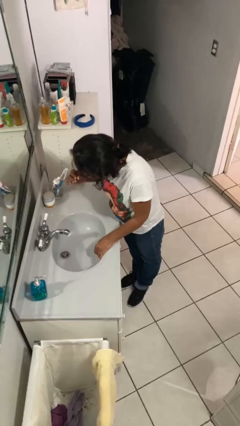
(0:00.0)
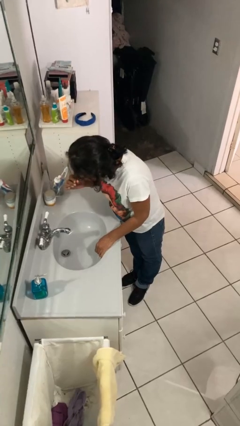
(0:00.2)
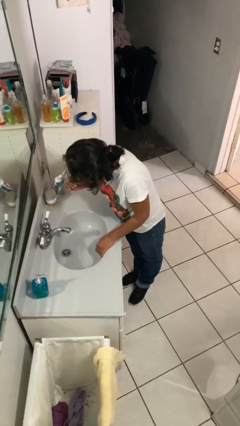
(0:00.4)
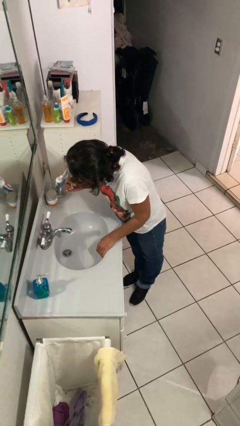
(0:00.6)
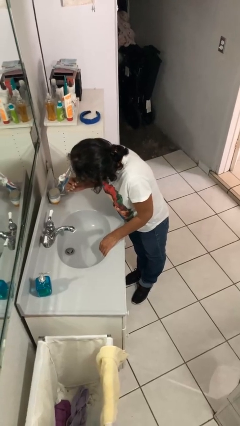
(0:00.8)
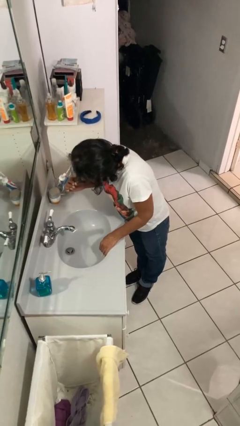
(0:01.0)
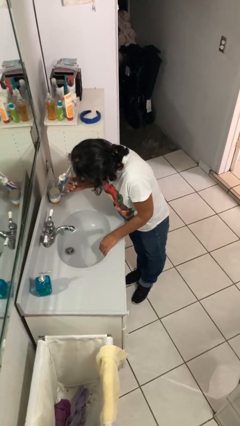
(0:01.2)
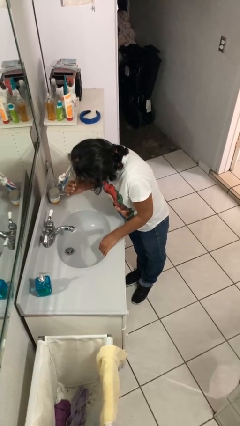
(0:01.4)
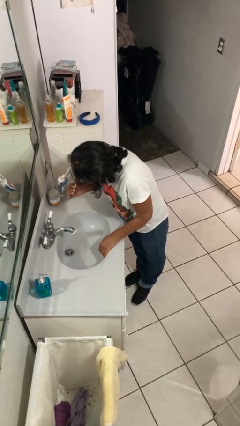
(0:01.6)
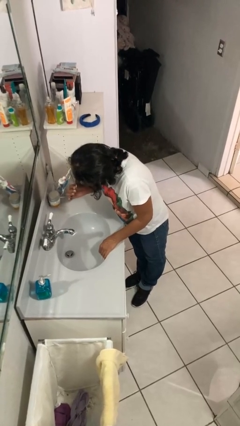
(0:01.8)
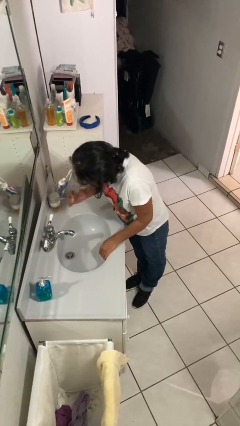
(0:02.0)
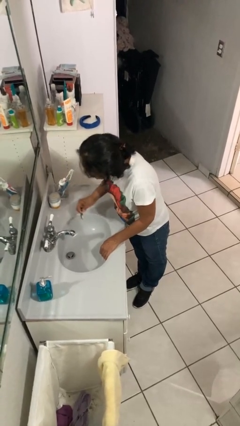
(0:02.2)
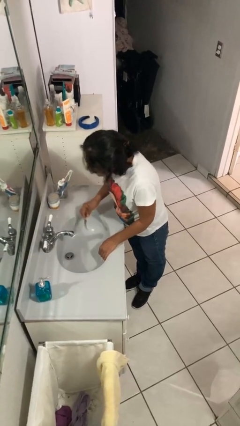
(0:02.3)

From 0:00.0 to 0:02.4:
person brushes teeth

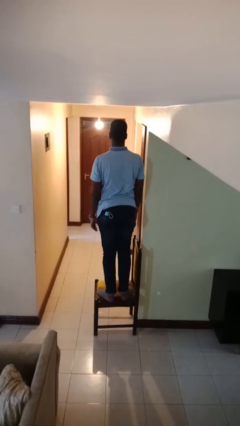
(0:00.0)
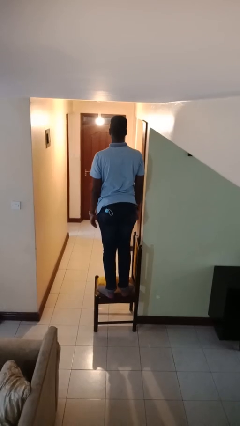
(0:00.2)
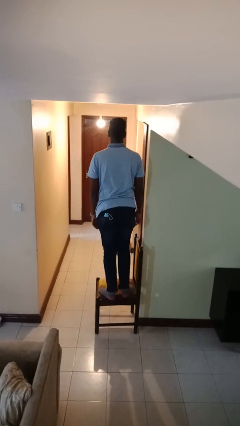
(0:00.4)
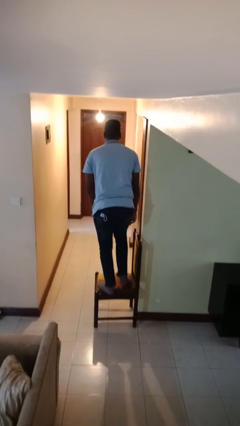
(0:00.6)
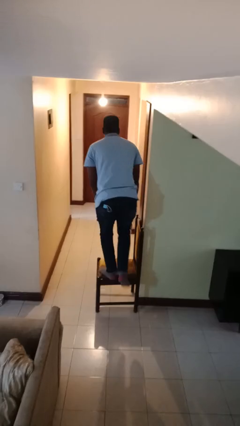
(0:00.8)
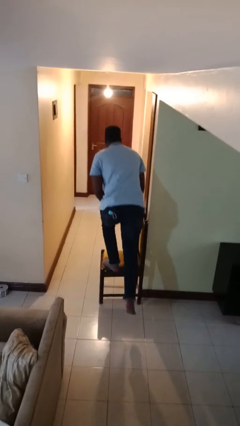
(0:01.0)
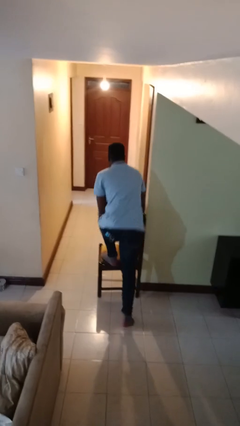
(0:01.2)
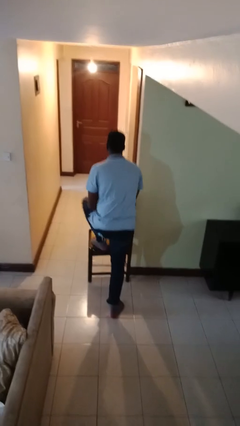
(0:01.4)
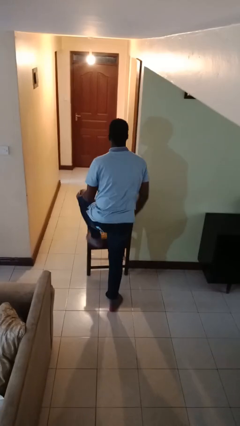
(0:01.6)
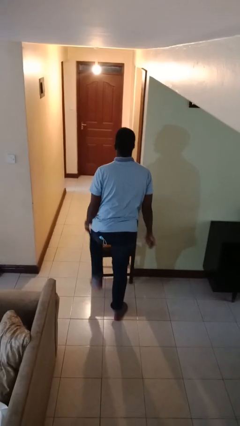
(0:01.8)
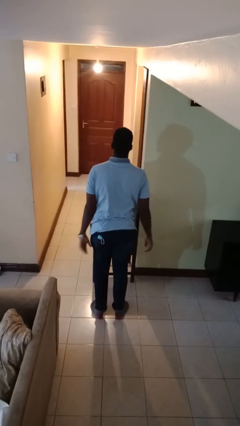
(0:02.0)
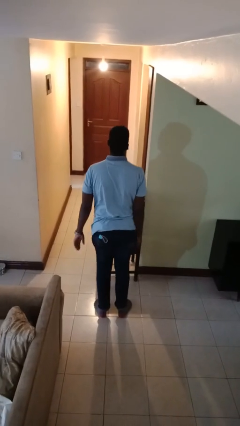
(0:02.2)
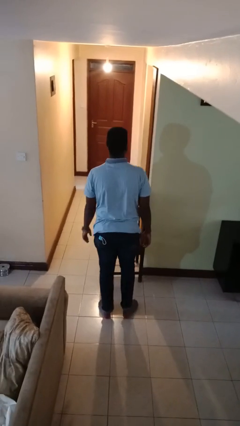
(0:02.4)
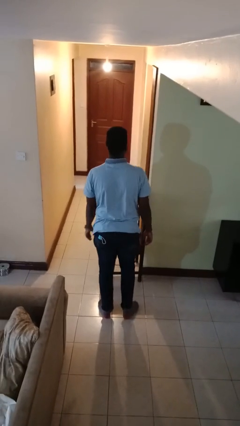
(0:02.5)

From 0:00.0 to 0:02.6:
person climbs off chair

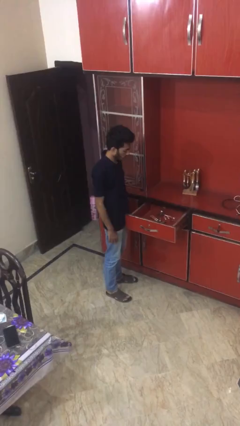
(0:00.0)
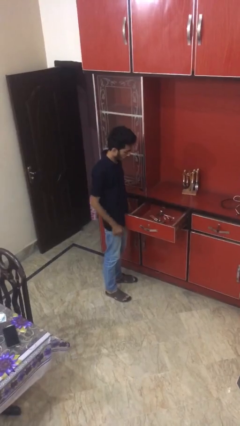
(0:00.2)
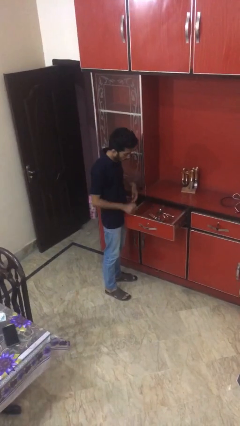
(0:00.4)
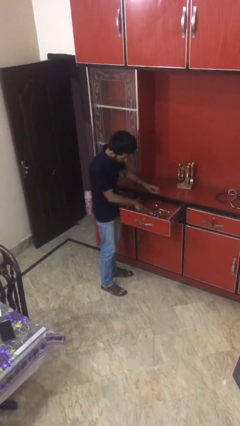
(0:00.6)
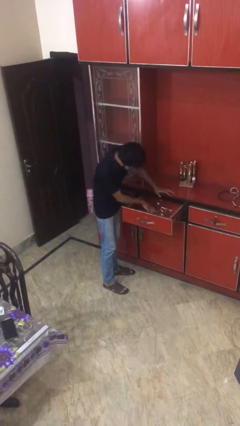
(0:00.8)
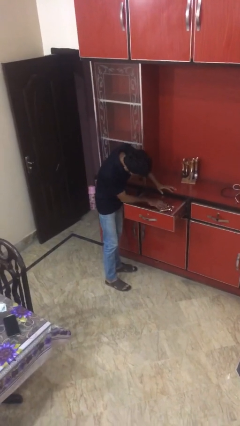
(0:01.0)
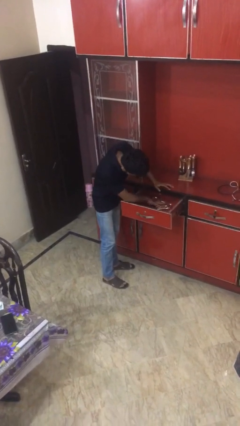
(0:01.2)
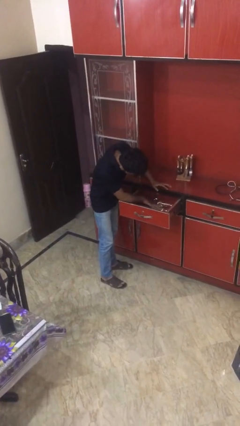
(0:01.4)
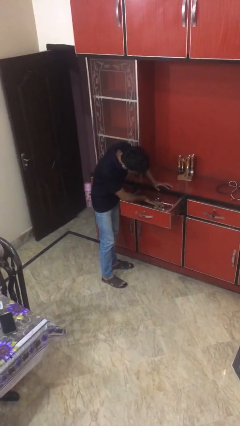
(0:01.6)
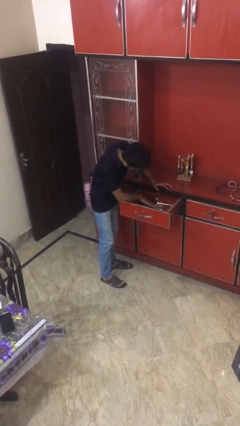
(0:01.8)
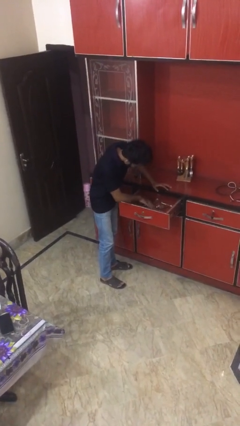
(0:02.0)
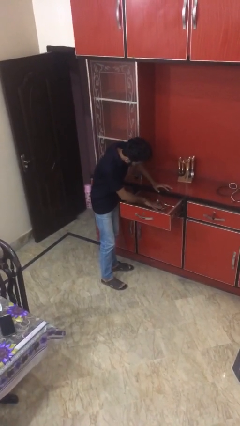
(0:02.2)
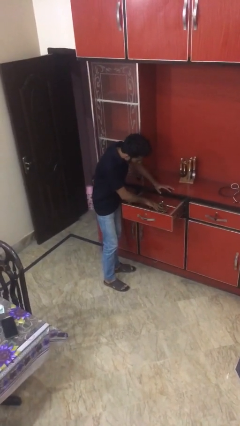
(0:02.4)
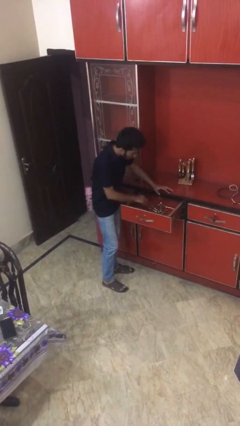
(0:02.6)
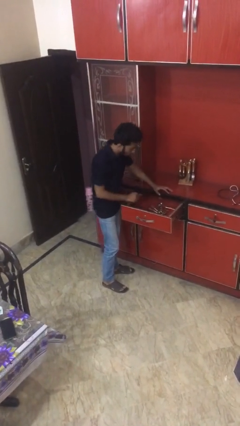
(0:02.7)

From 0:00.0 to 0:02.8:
person searches in kitchen drawer

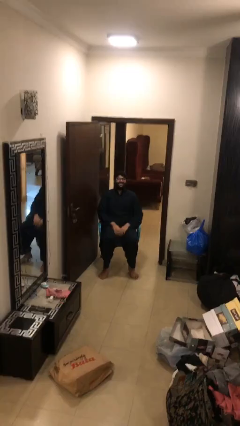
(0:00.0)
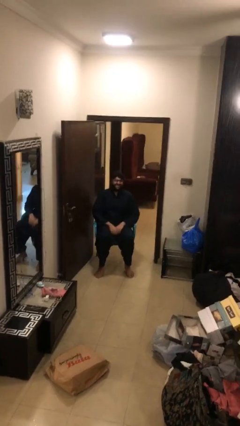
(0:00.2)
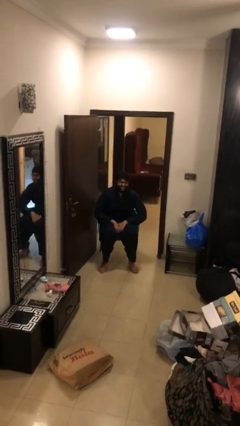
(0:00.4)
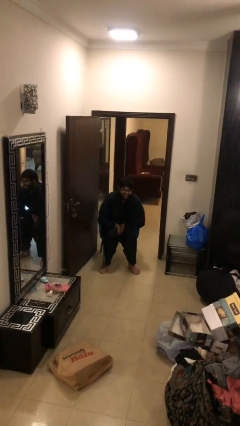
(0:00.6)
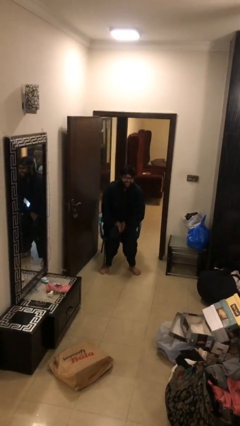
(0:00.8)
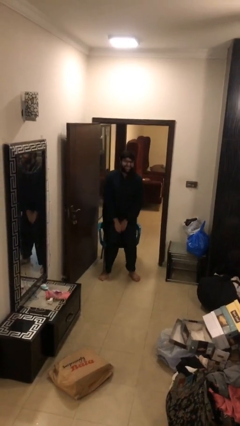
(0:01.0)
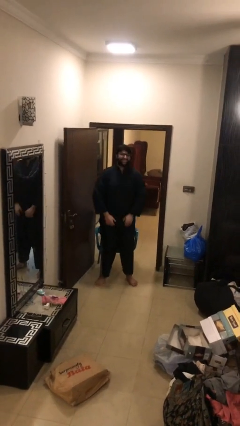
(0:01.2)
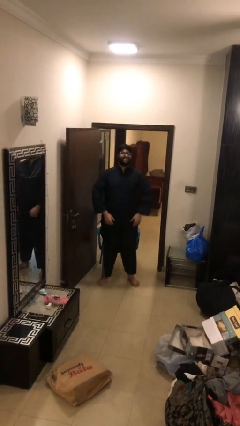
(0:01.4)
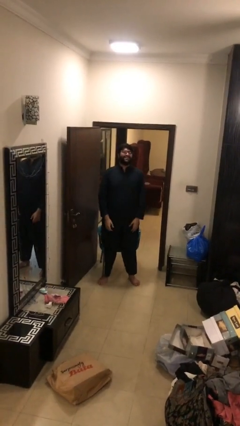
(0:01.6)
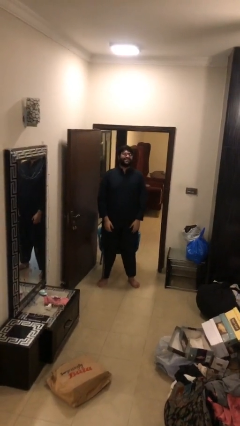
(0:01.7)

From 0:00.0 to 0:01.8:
person stands up

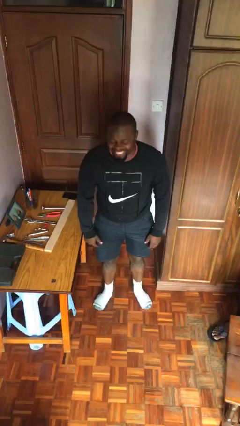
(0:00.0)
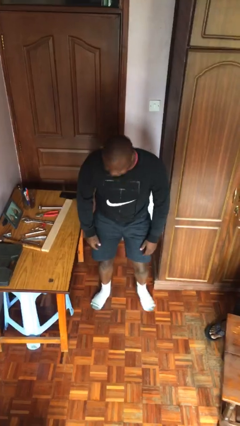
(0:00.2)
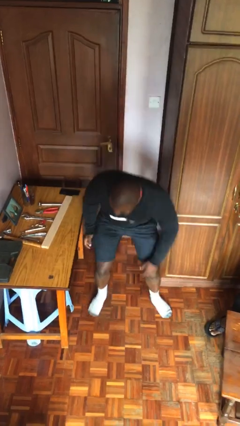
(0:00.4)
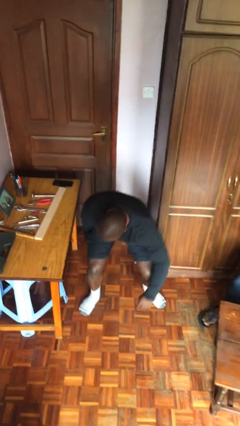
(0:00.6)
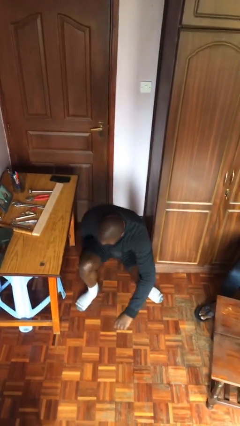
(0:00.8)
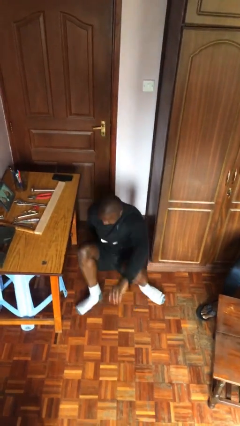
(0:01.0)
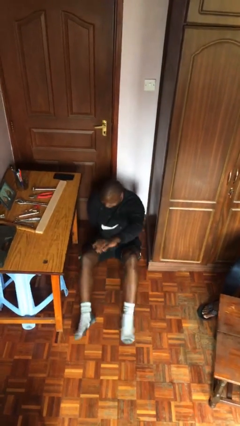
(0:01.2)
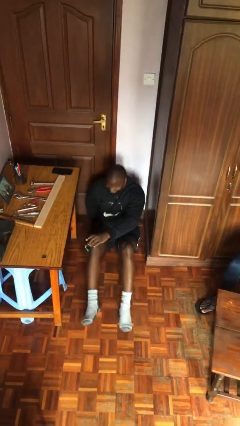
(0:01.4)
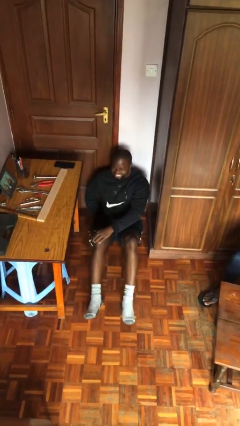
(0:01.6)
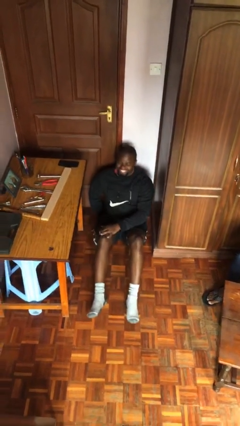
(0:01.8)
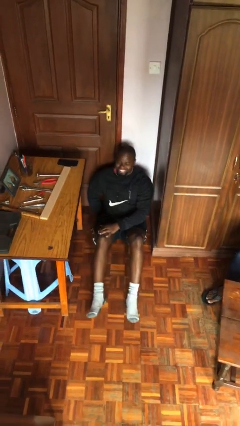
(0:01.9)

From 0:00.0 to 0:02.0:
person sits down

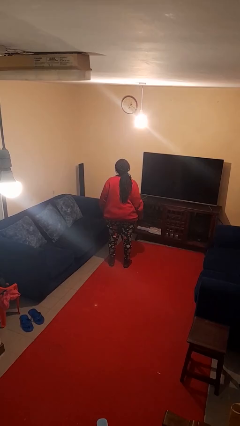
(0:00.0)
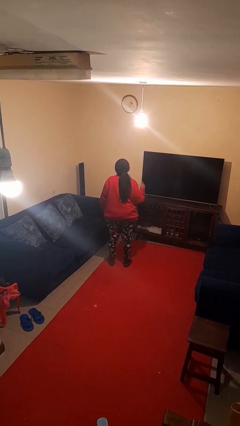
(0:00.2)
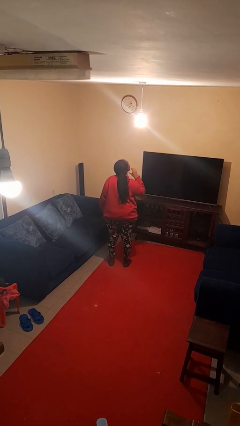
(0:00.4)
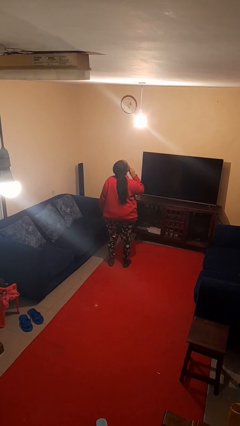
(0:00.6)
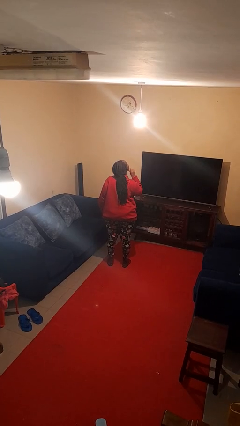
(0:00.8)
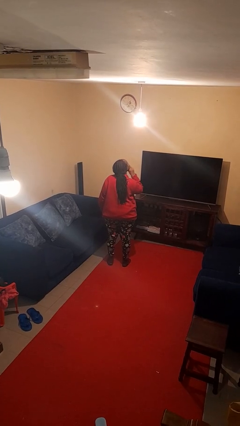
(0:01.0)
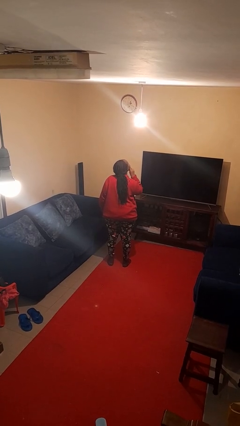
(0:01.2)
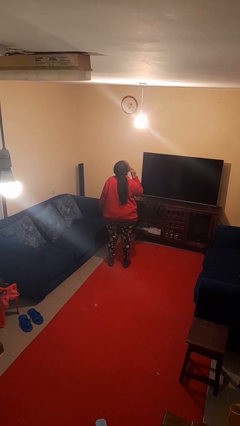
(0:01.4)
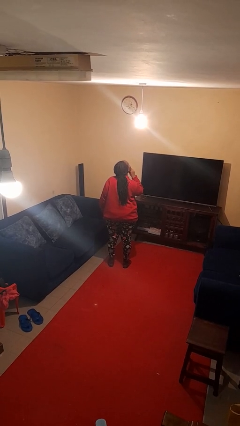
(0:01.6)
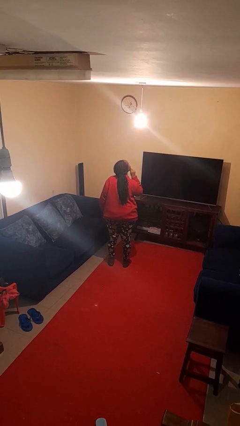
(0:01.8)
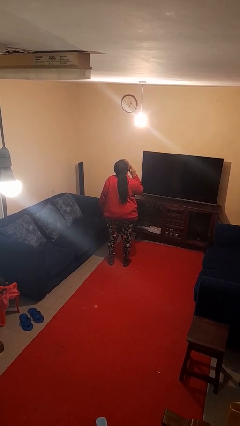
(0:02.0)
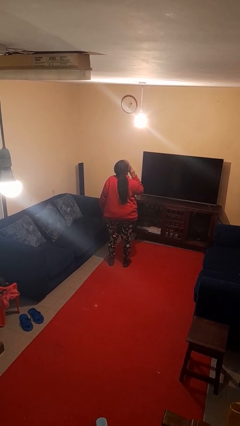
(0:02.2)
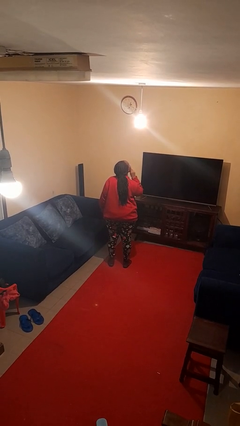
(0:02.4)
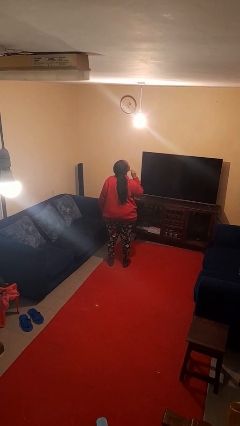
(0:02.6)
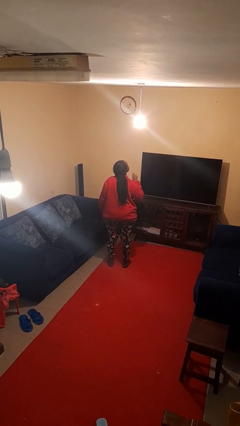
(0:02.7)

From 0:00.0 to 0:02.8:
person strokes chin

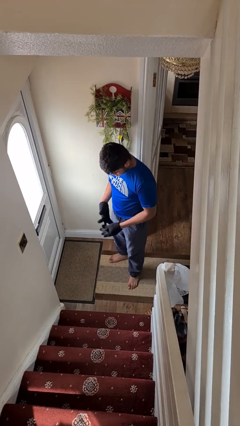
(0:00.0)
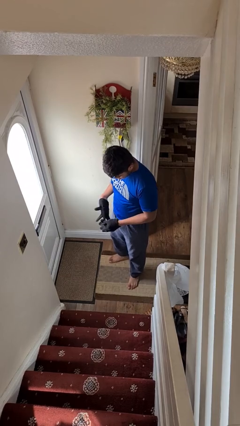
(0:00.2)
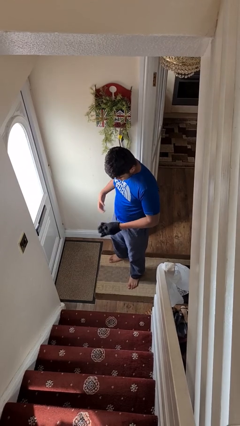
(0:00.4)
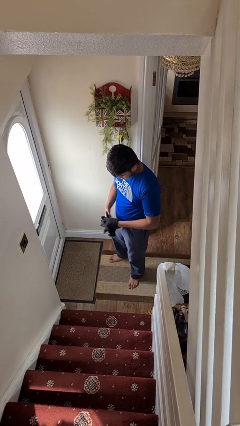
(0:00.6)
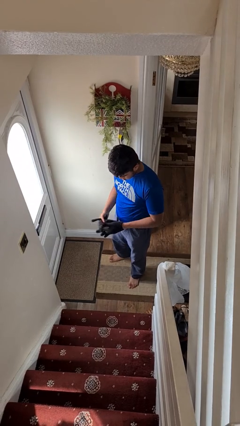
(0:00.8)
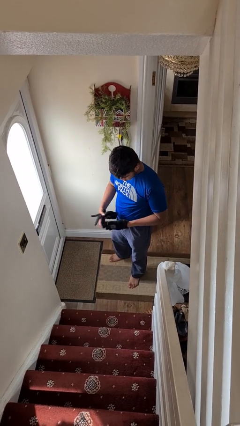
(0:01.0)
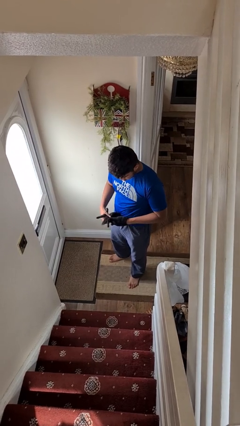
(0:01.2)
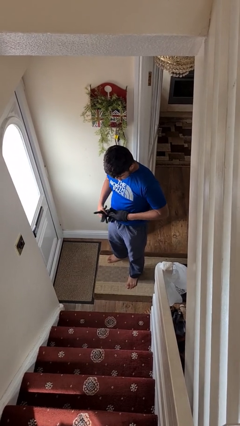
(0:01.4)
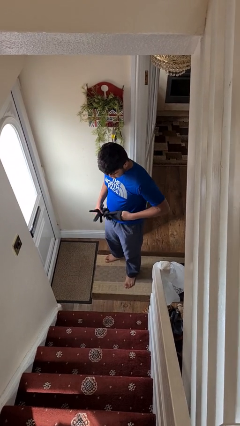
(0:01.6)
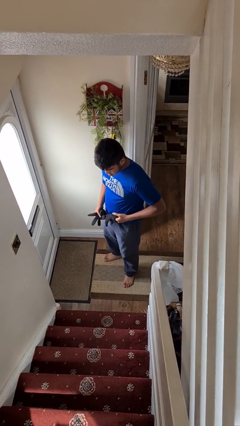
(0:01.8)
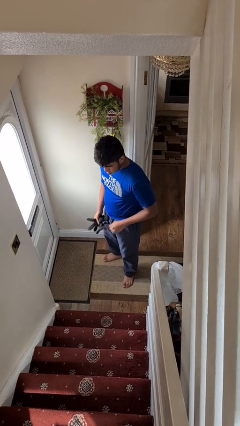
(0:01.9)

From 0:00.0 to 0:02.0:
person takes off gloves

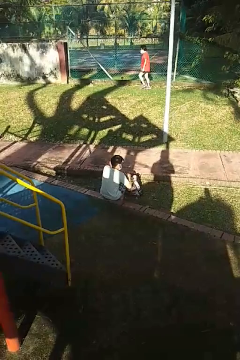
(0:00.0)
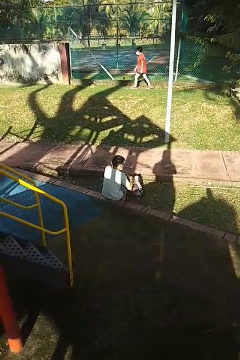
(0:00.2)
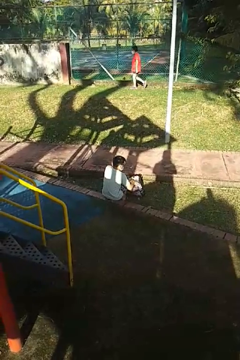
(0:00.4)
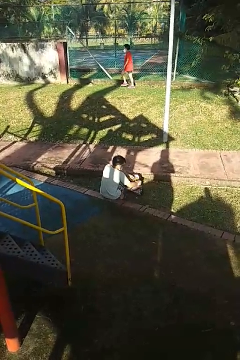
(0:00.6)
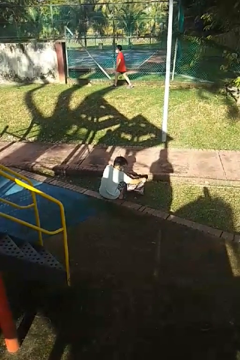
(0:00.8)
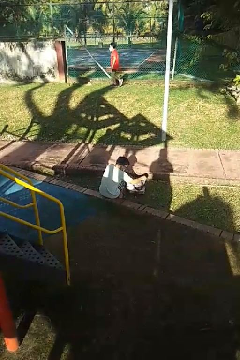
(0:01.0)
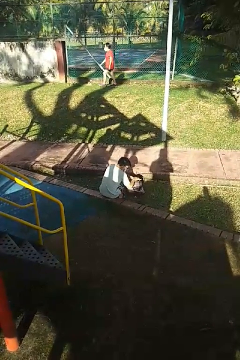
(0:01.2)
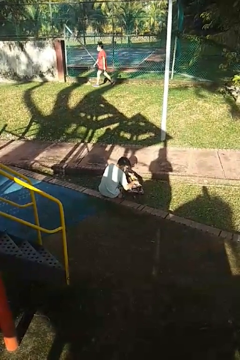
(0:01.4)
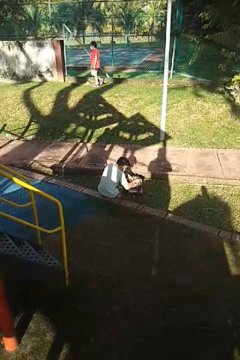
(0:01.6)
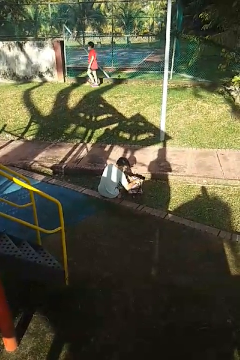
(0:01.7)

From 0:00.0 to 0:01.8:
person searches in bag
